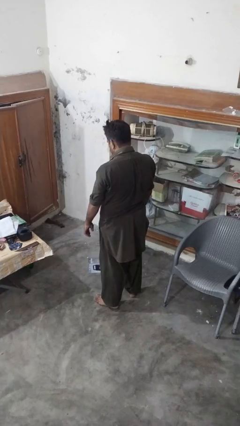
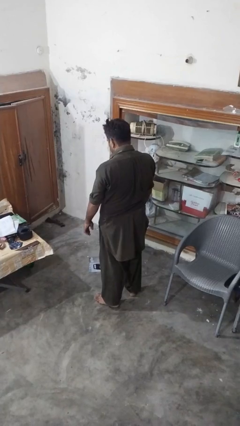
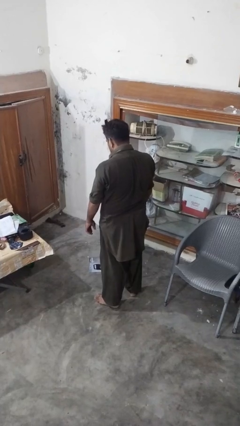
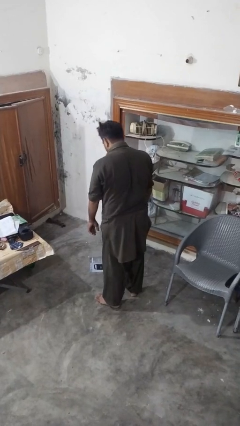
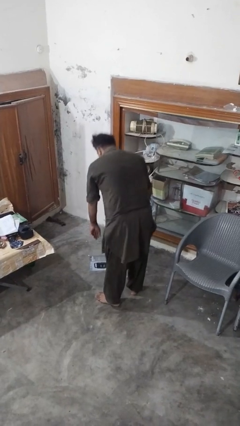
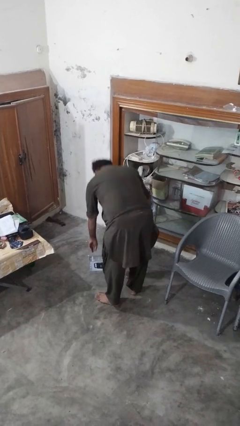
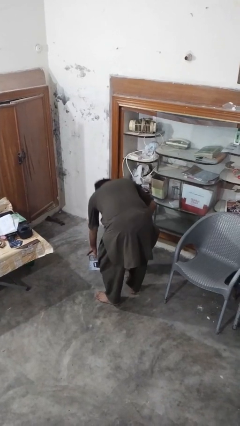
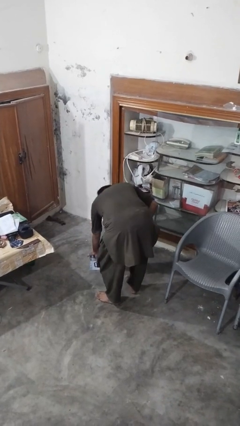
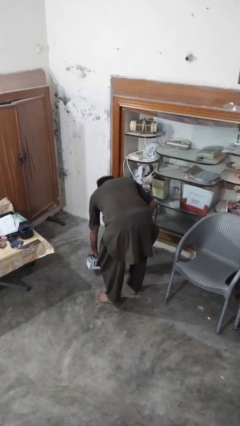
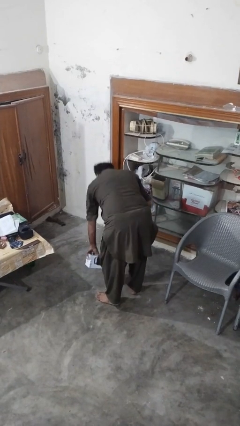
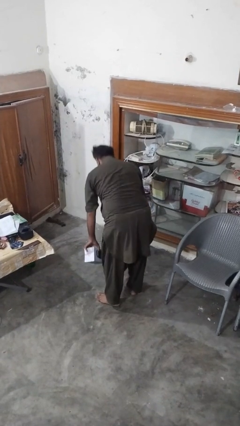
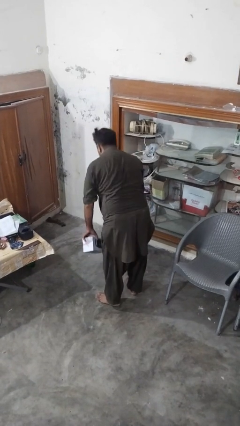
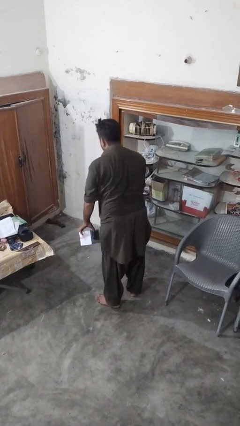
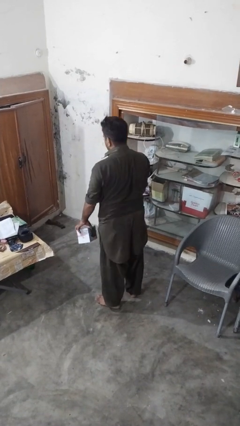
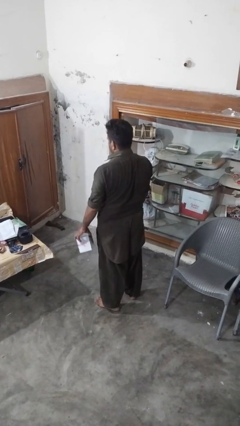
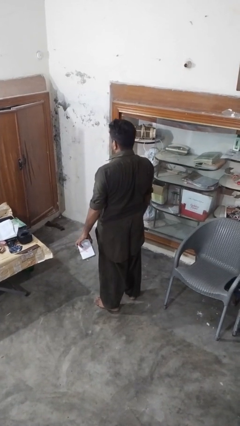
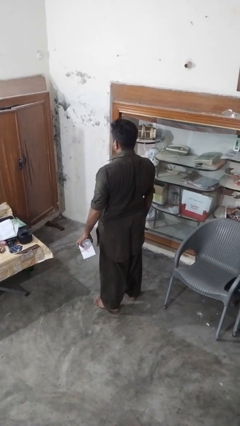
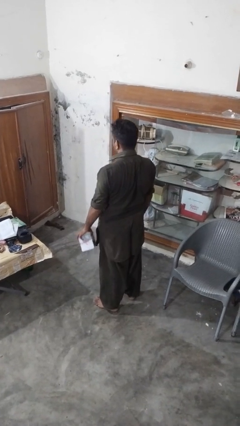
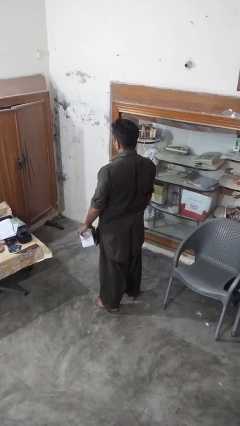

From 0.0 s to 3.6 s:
person picks up object from floor

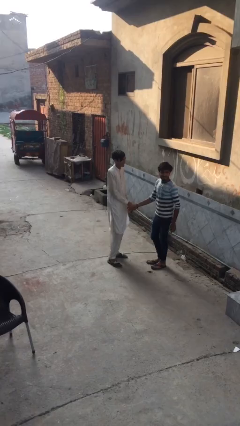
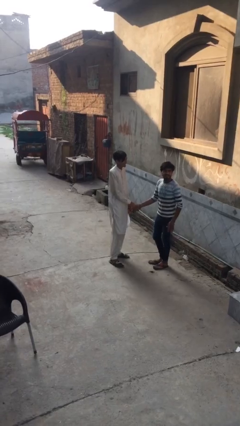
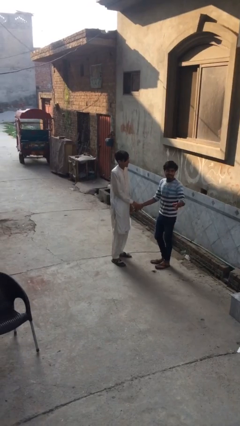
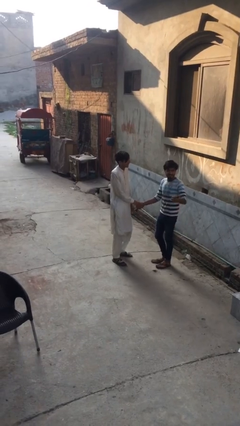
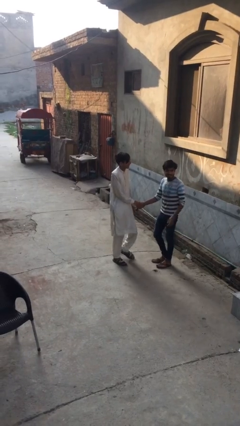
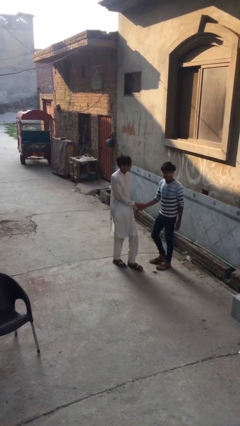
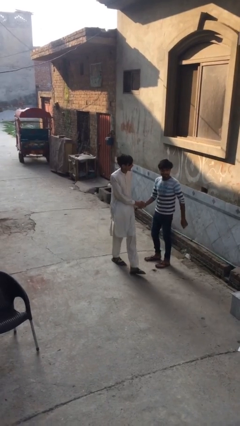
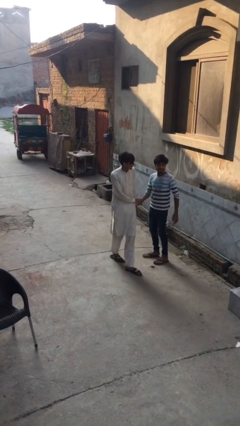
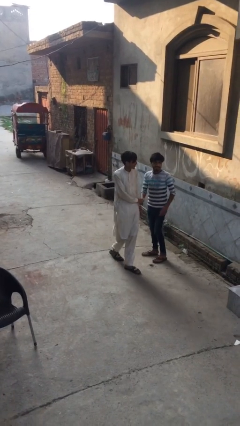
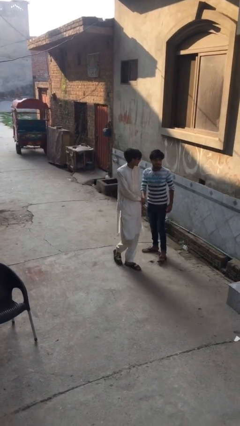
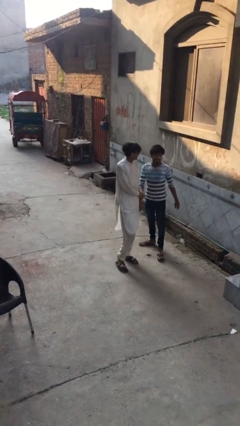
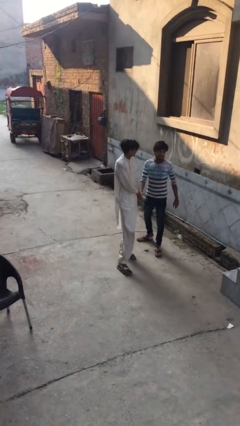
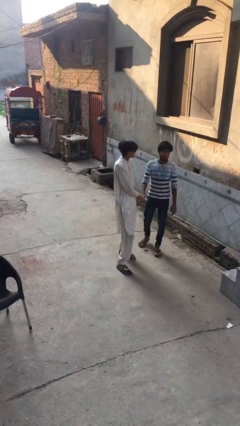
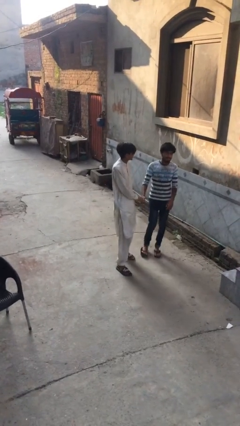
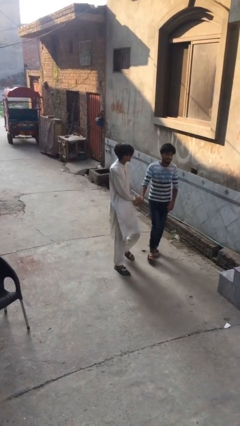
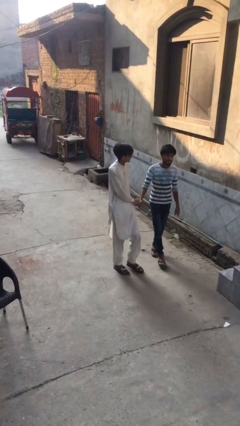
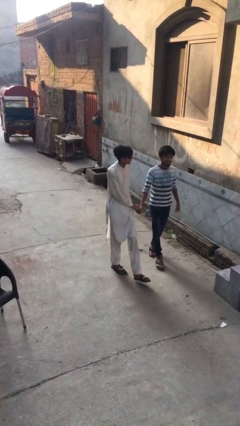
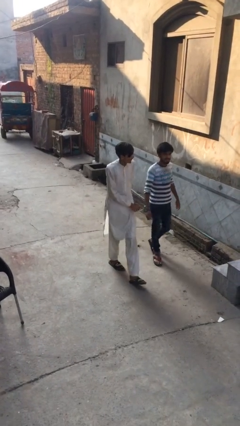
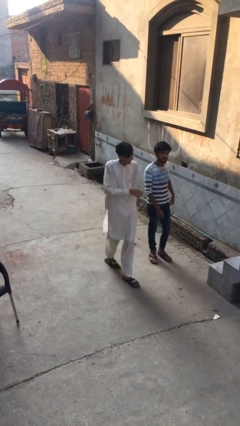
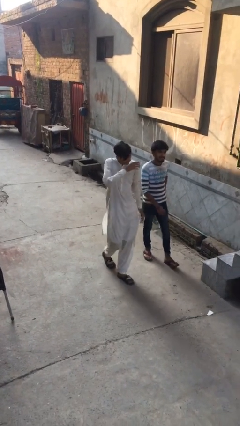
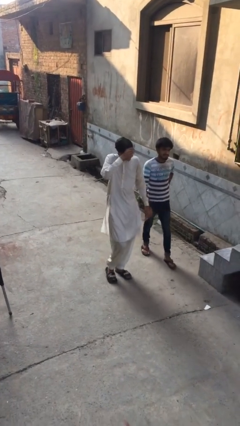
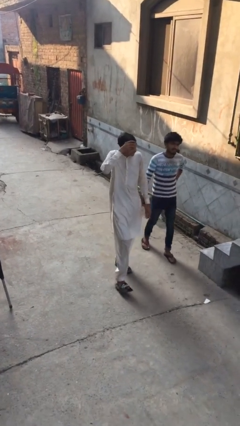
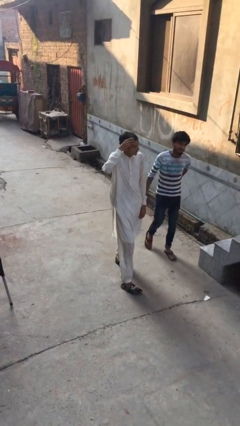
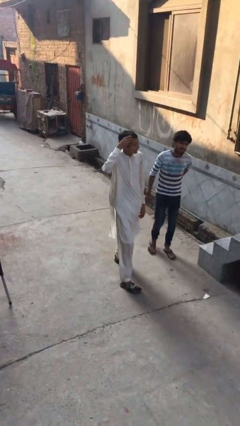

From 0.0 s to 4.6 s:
person talks to person

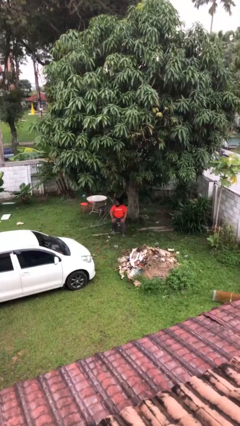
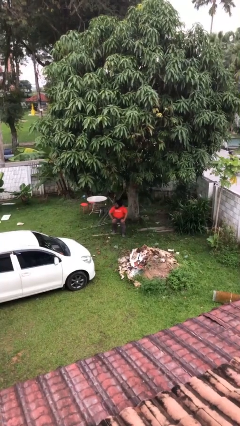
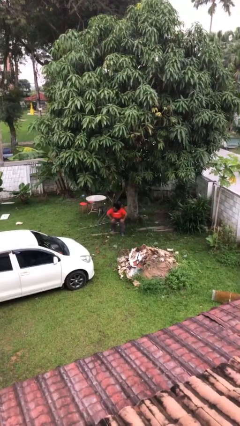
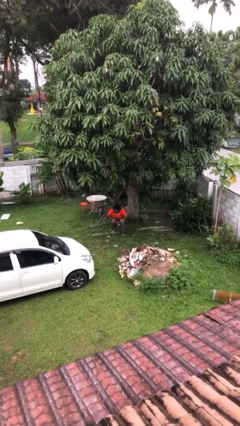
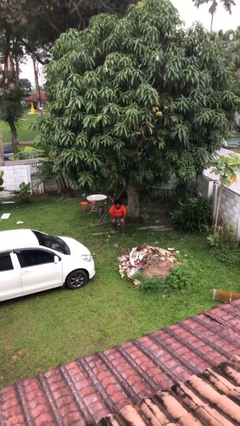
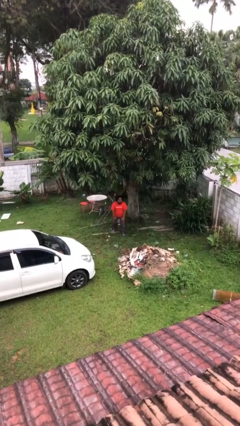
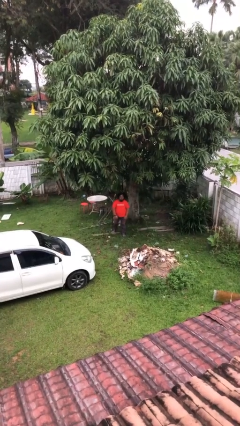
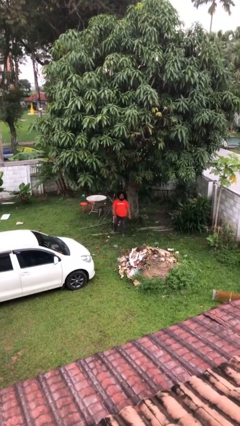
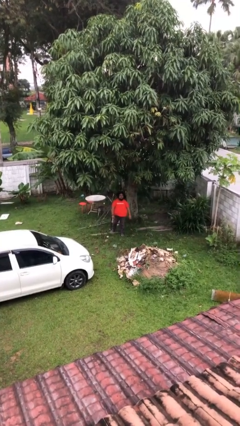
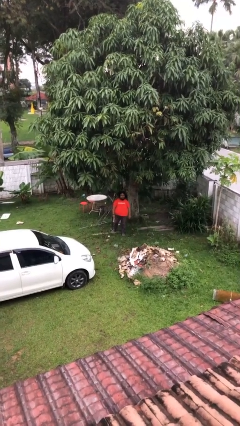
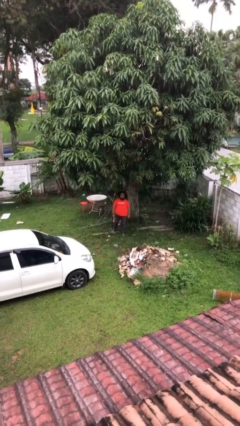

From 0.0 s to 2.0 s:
person stands up

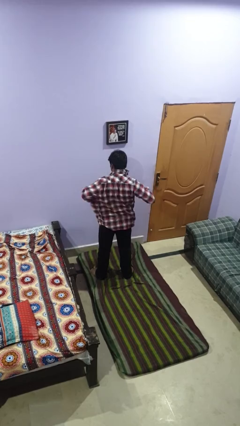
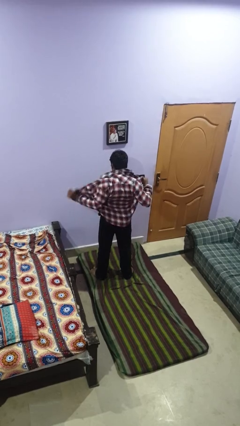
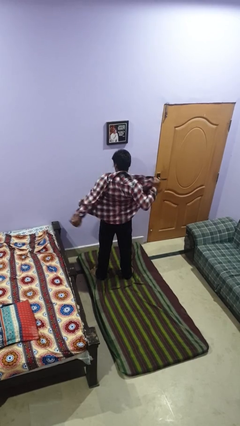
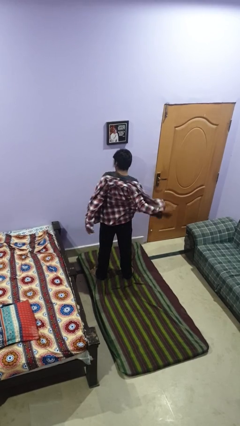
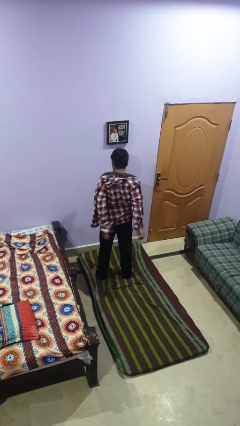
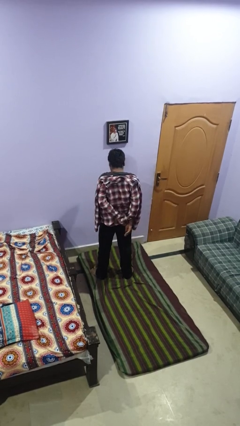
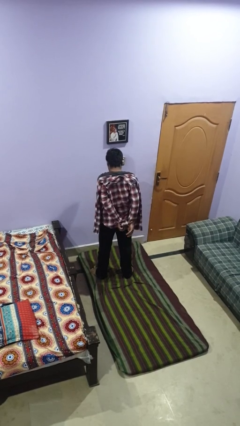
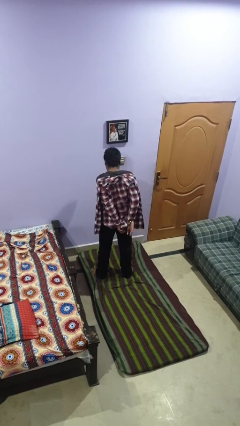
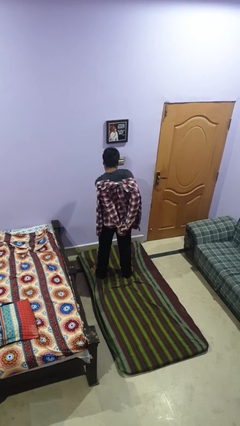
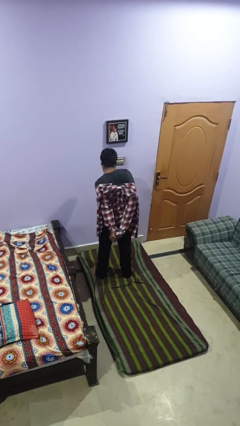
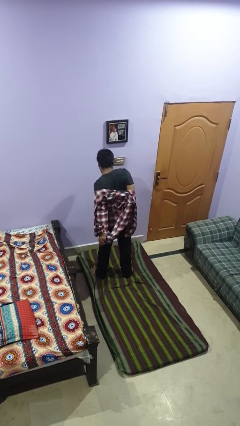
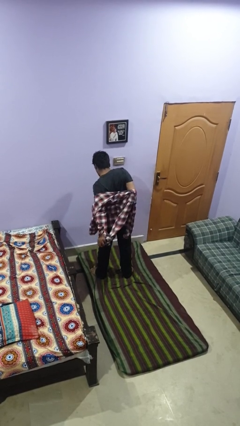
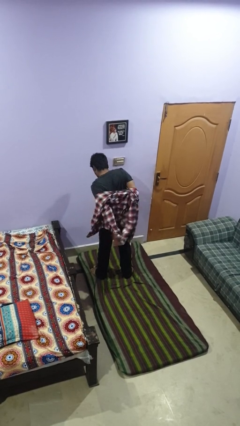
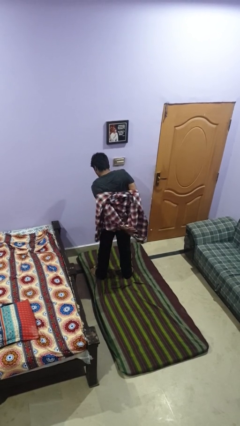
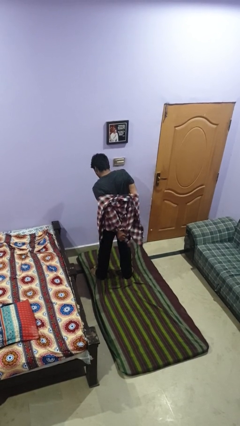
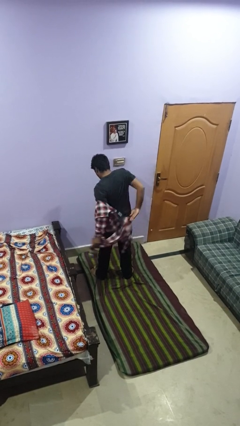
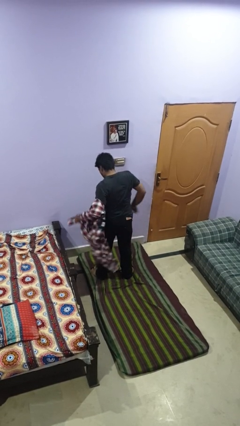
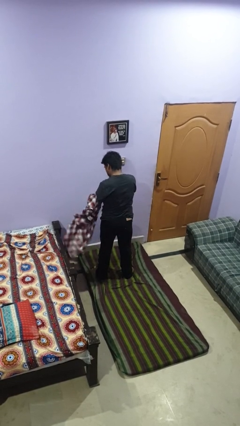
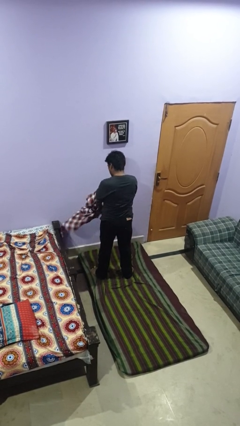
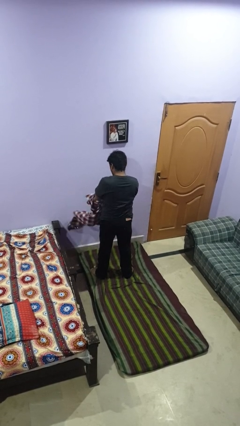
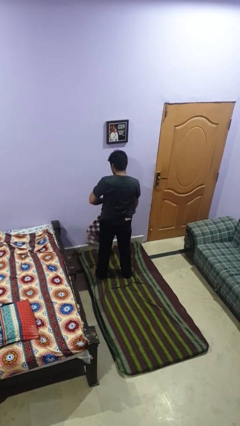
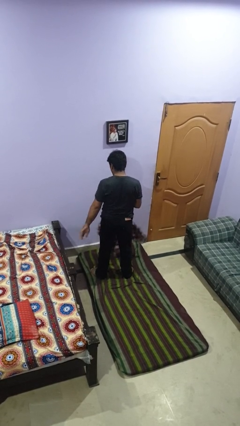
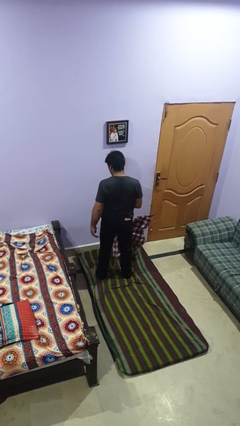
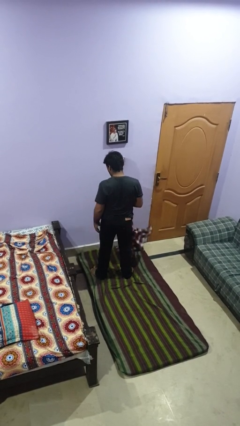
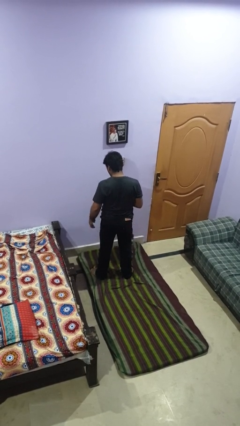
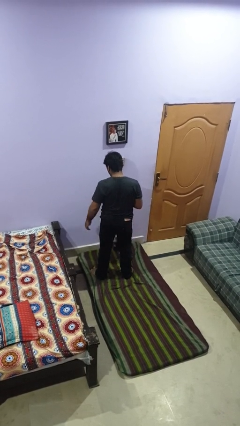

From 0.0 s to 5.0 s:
person takes off shirt

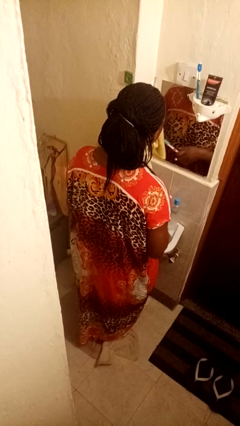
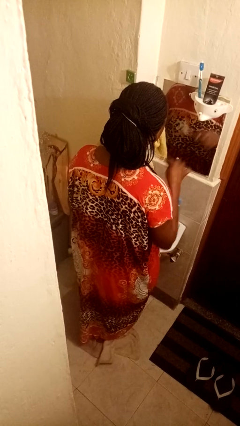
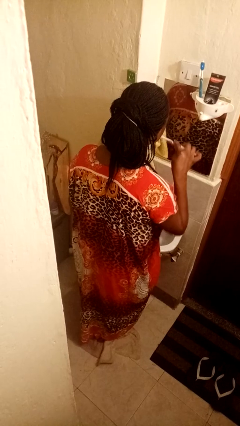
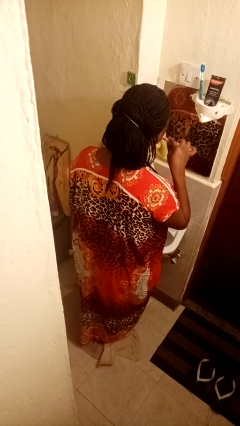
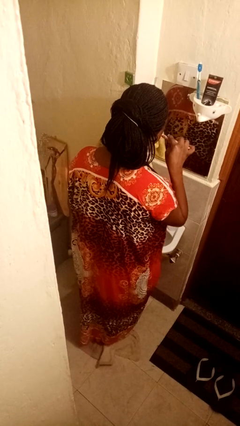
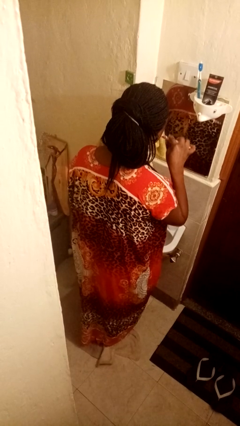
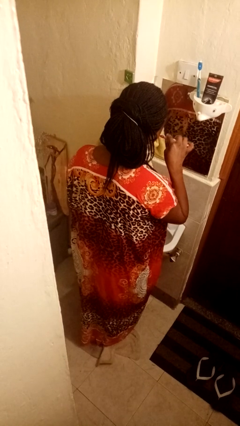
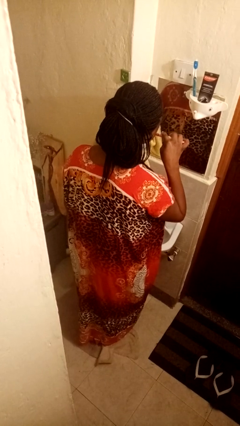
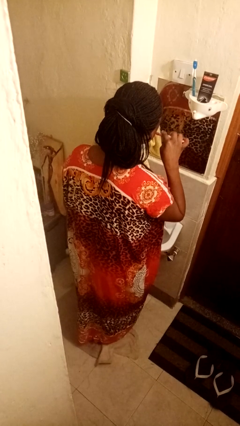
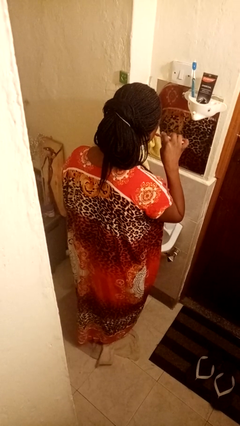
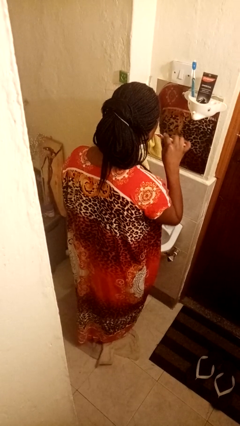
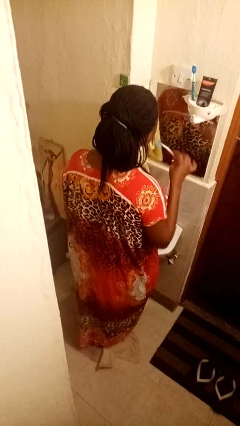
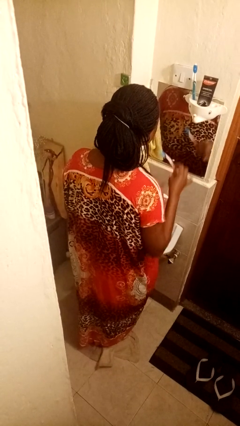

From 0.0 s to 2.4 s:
person brushes teeth

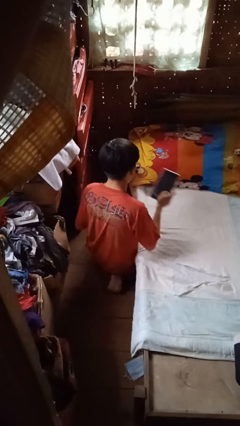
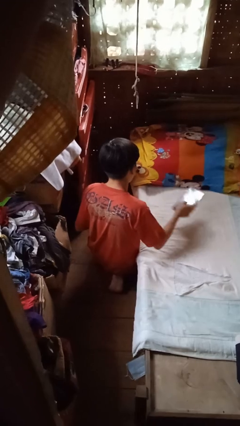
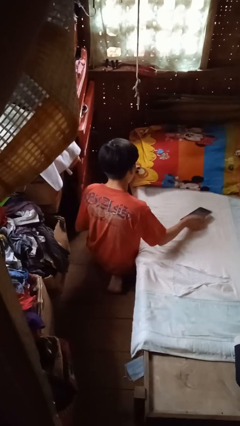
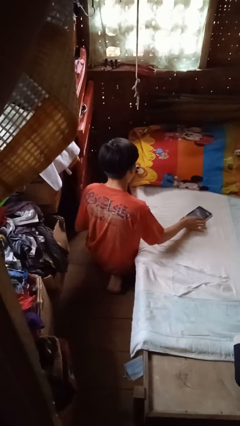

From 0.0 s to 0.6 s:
person puts down object on bed
